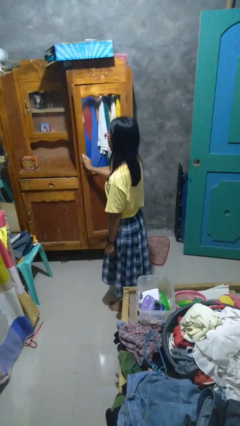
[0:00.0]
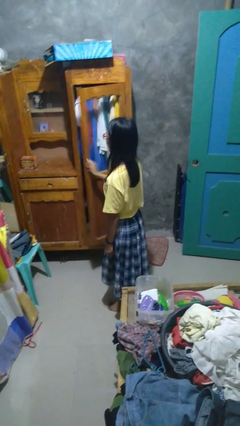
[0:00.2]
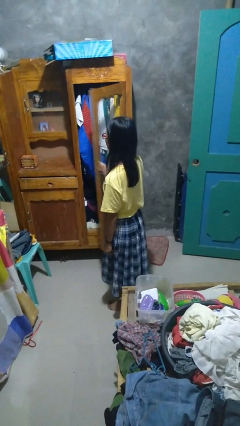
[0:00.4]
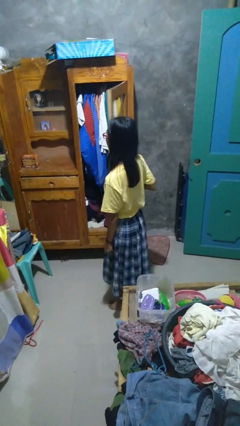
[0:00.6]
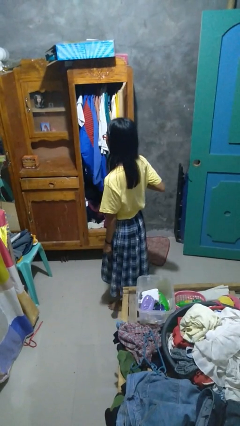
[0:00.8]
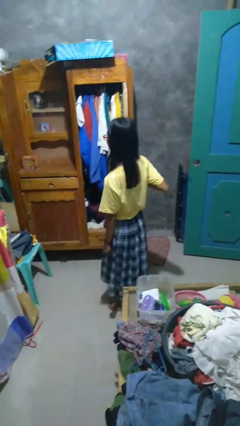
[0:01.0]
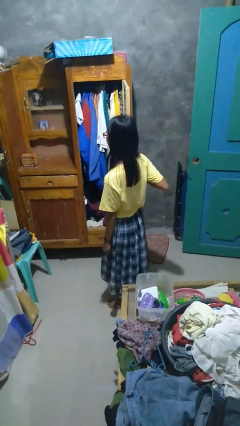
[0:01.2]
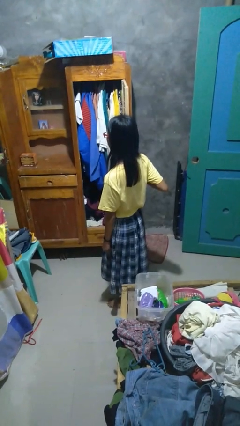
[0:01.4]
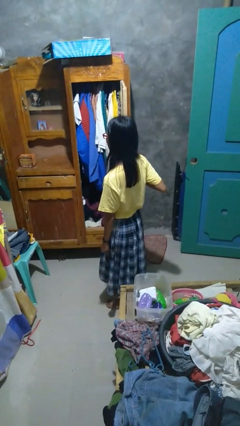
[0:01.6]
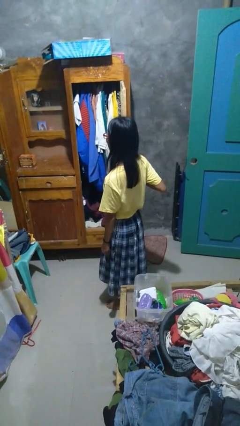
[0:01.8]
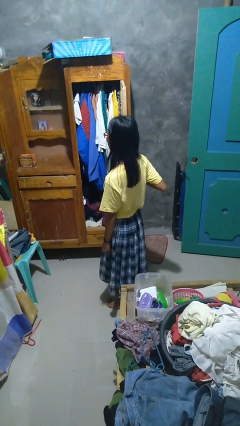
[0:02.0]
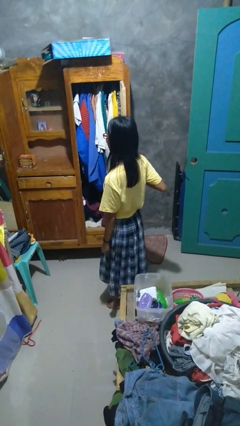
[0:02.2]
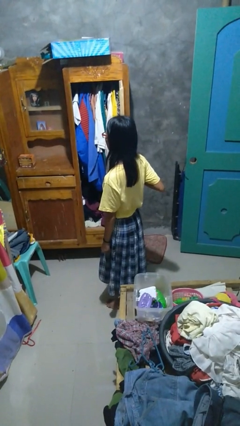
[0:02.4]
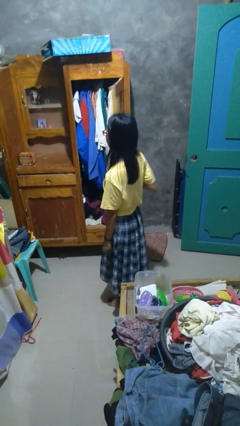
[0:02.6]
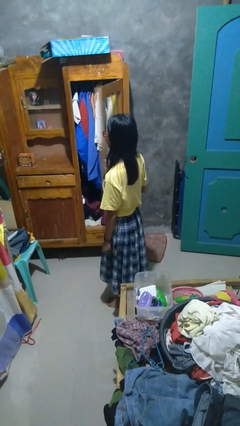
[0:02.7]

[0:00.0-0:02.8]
person opens closet door

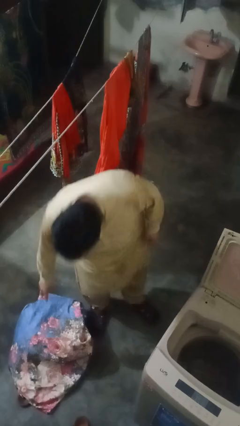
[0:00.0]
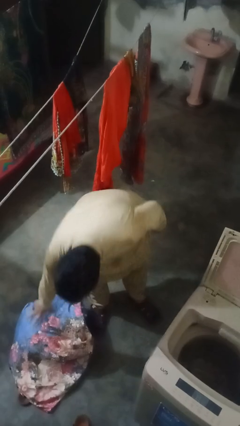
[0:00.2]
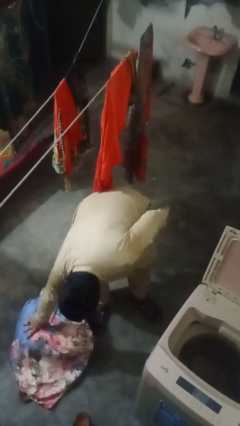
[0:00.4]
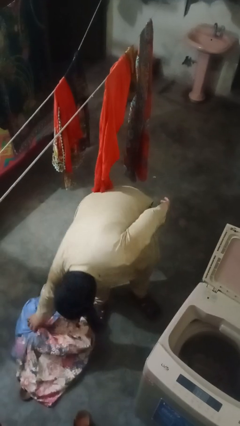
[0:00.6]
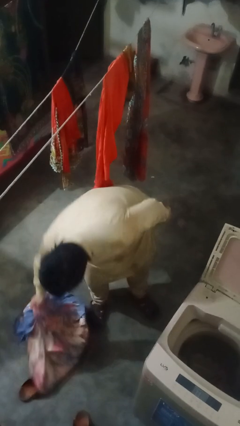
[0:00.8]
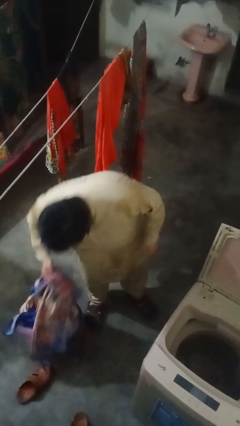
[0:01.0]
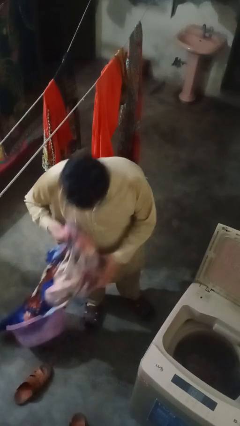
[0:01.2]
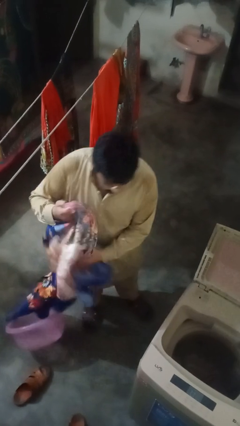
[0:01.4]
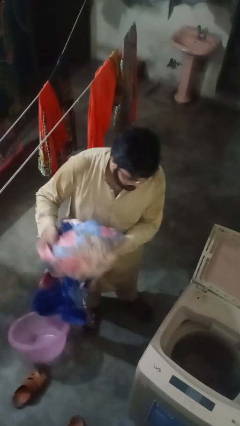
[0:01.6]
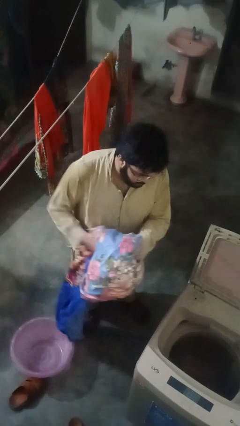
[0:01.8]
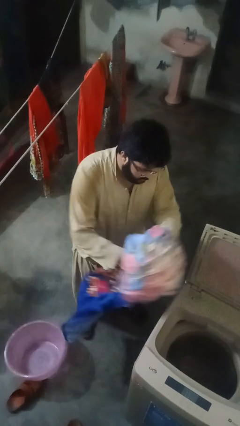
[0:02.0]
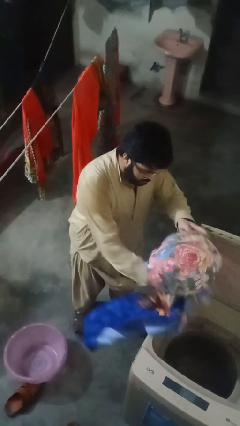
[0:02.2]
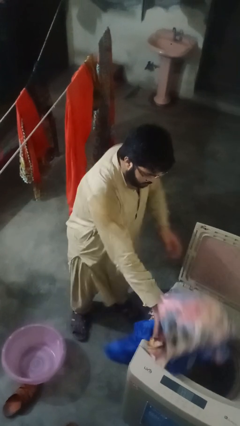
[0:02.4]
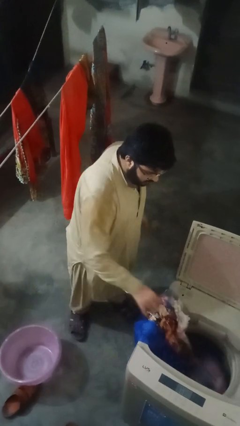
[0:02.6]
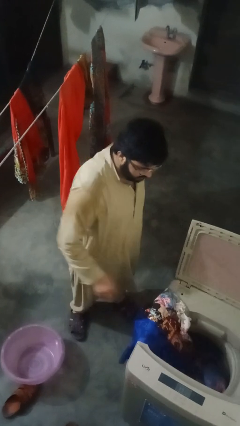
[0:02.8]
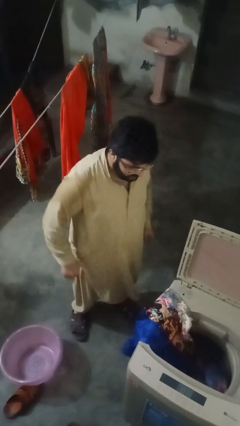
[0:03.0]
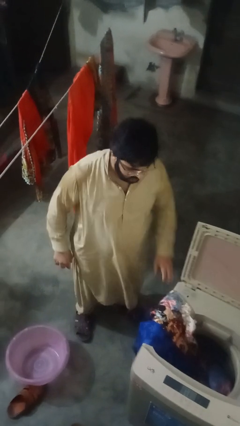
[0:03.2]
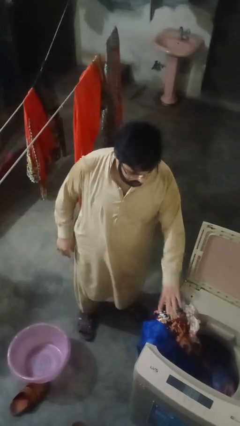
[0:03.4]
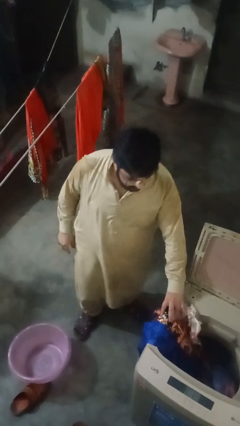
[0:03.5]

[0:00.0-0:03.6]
person loads clotheswasher

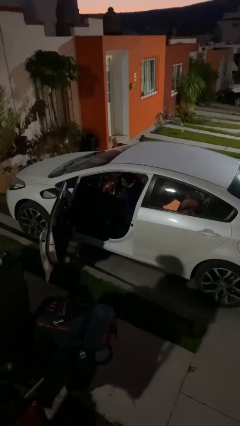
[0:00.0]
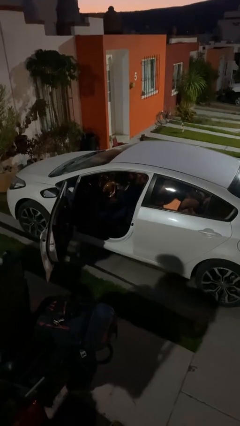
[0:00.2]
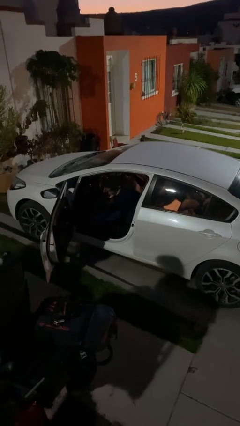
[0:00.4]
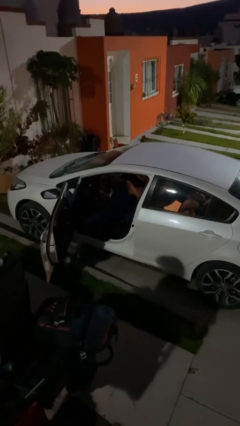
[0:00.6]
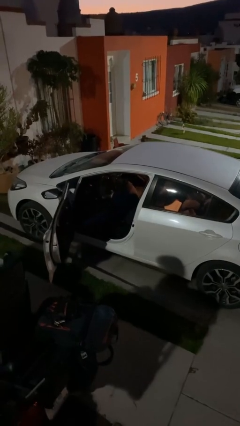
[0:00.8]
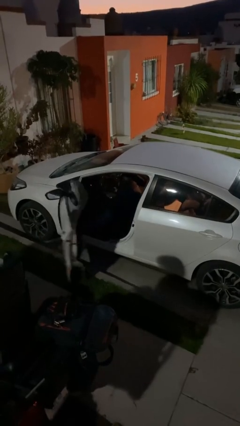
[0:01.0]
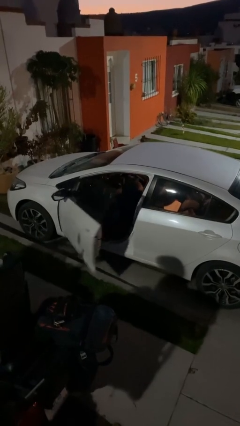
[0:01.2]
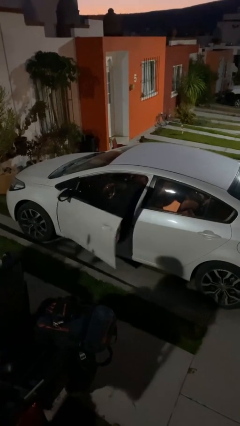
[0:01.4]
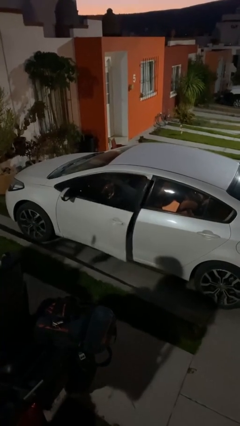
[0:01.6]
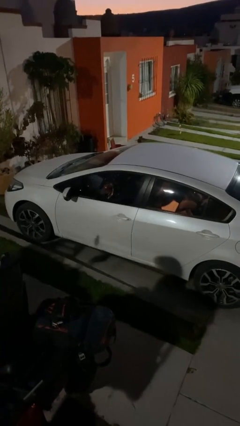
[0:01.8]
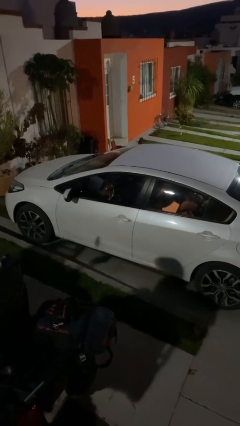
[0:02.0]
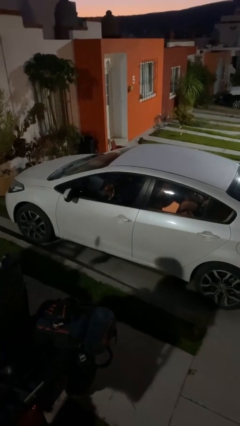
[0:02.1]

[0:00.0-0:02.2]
person closes car door

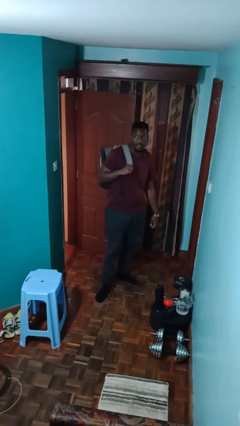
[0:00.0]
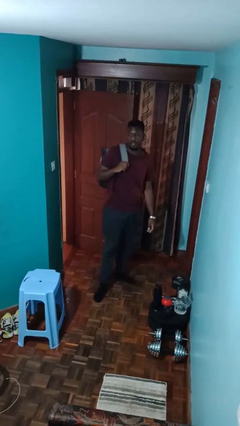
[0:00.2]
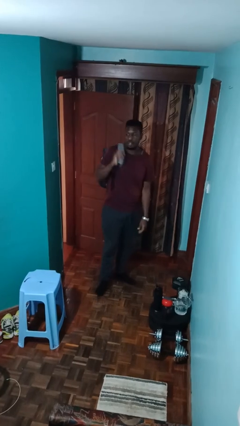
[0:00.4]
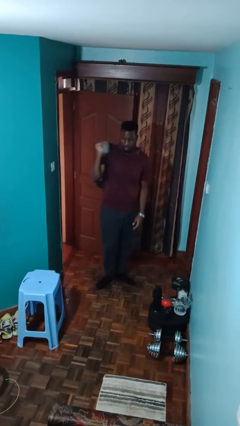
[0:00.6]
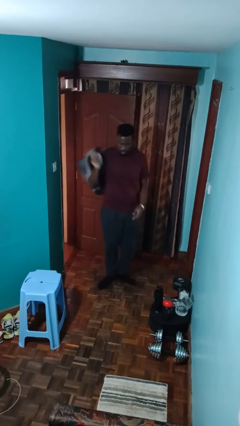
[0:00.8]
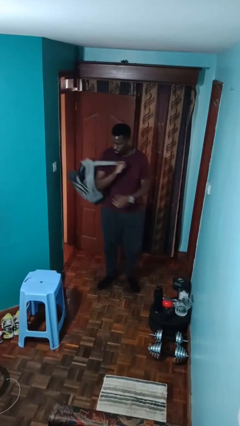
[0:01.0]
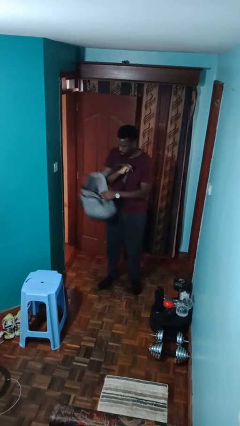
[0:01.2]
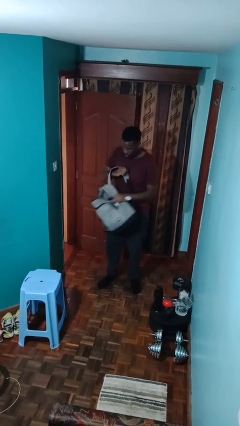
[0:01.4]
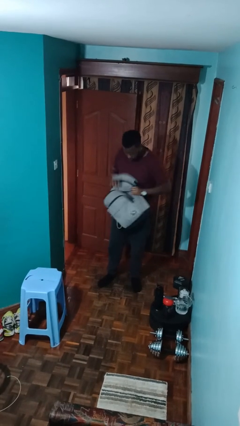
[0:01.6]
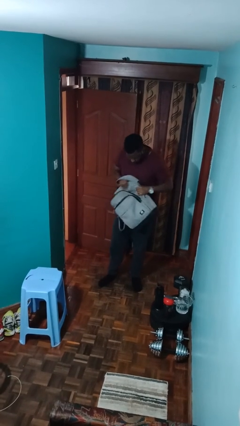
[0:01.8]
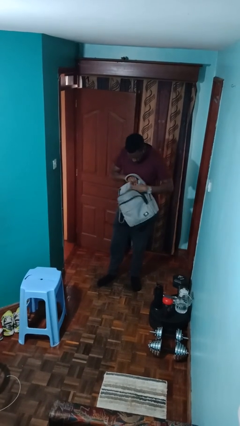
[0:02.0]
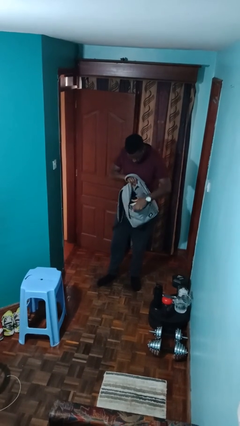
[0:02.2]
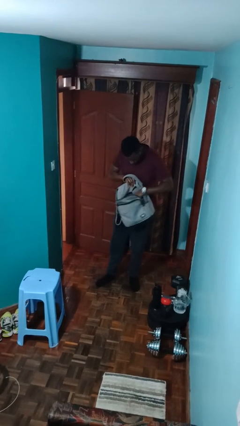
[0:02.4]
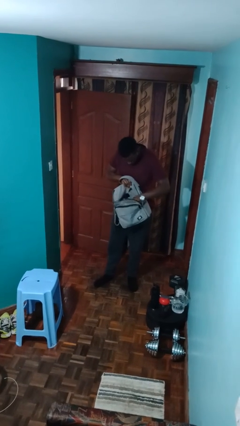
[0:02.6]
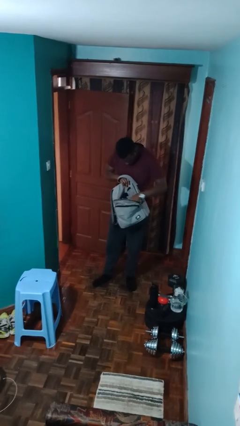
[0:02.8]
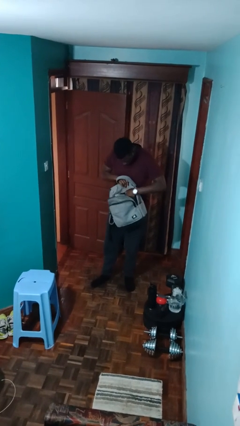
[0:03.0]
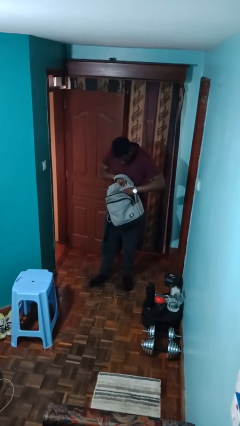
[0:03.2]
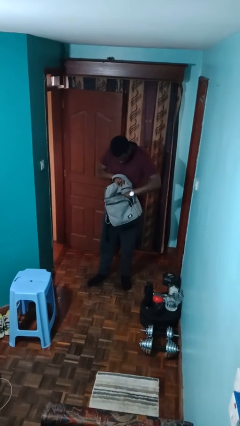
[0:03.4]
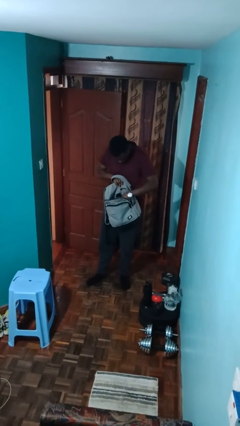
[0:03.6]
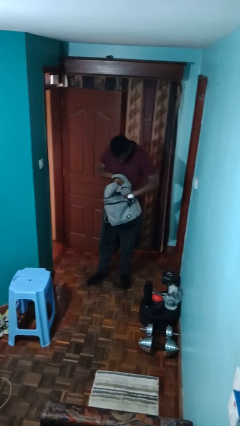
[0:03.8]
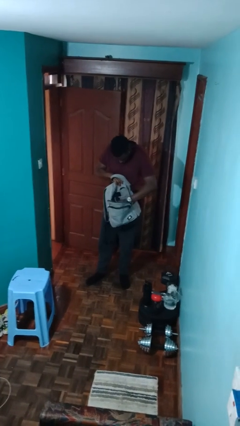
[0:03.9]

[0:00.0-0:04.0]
person searches in backpack

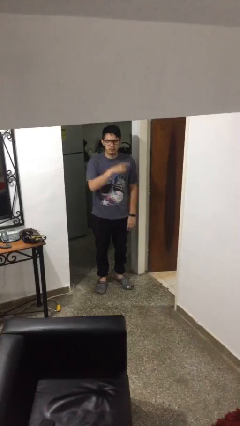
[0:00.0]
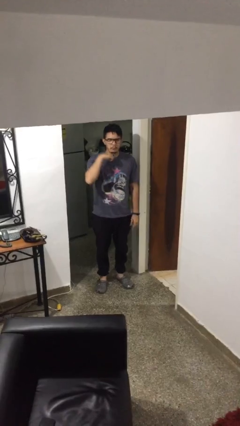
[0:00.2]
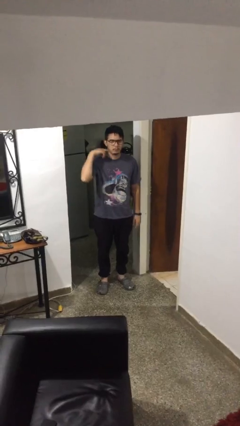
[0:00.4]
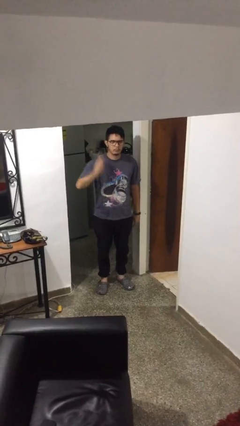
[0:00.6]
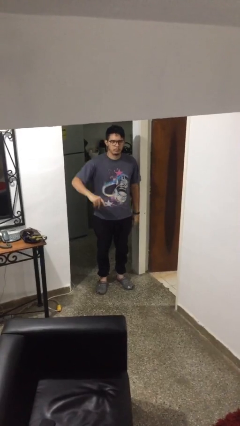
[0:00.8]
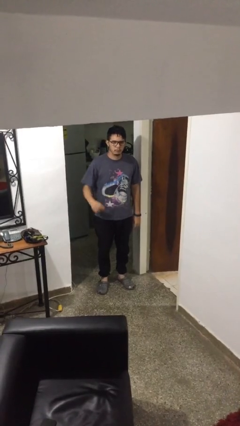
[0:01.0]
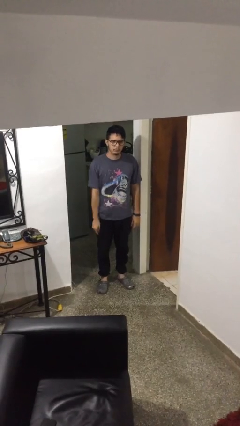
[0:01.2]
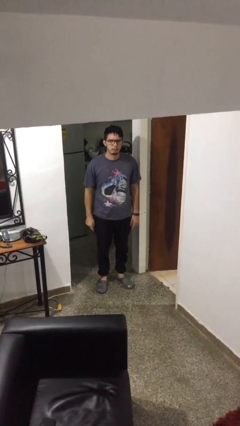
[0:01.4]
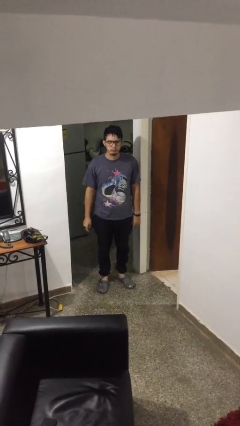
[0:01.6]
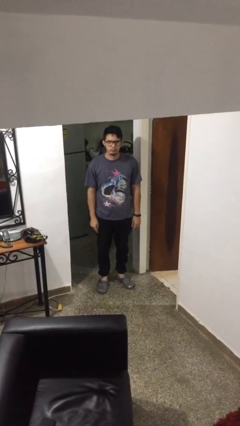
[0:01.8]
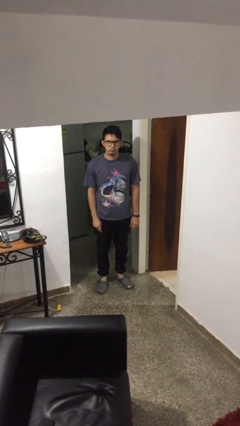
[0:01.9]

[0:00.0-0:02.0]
person gestures cut

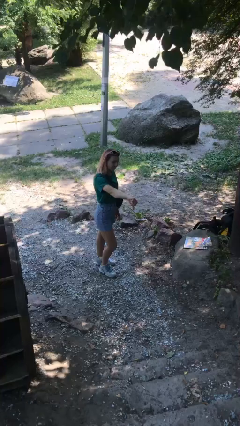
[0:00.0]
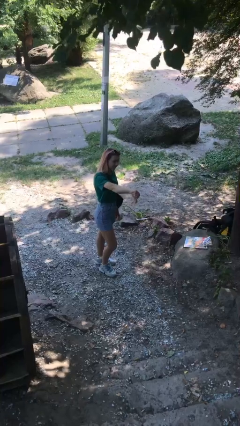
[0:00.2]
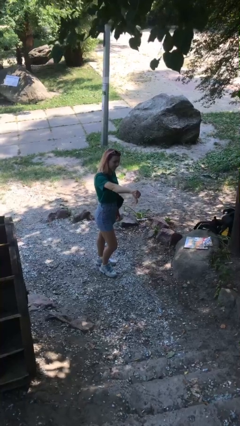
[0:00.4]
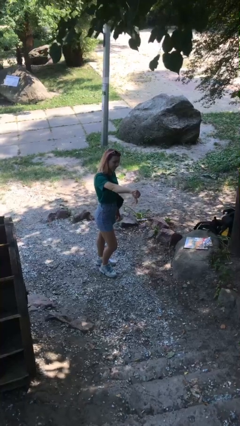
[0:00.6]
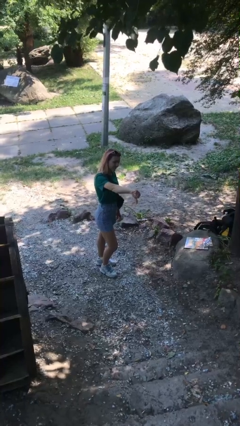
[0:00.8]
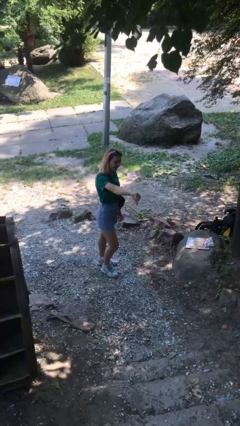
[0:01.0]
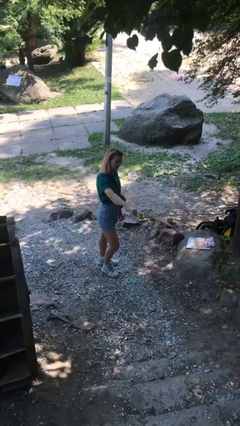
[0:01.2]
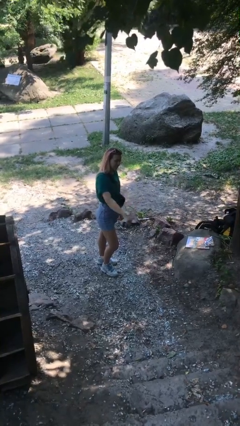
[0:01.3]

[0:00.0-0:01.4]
person gestures thumbs down

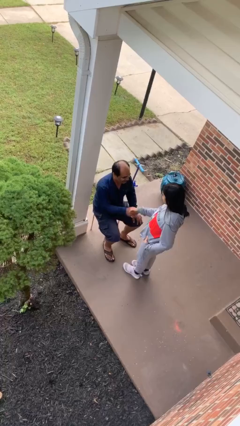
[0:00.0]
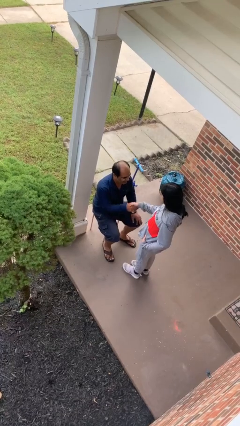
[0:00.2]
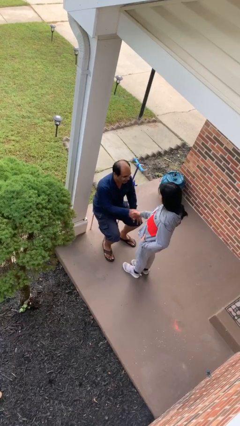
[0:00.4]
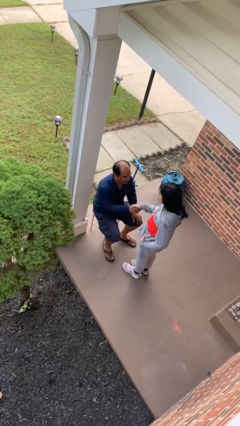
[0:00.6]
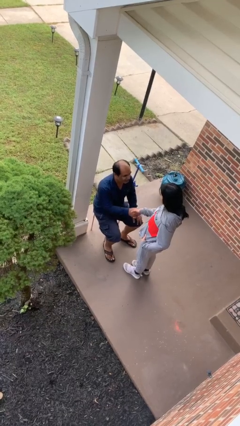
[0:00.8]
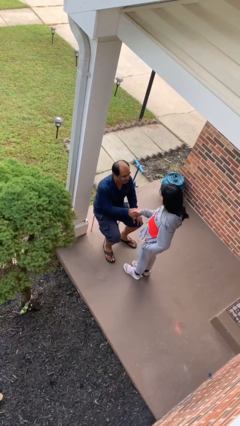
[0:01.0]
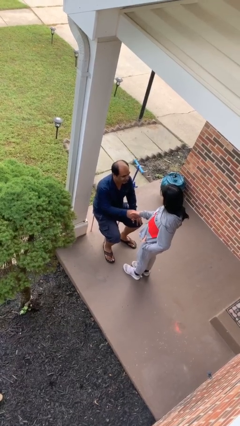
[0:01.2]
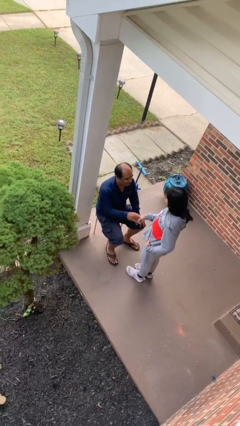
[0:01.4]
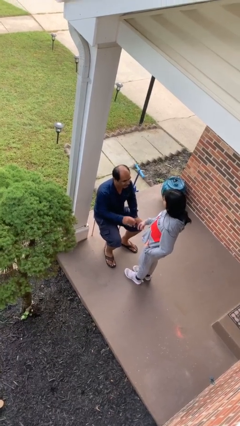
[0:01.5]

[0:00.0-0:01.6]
person shakes hand
